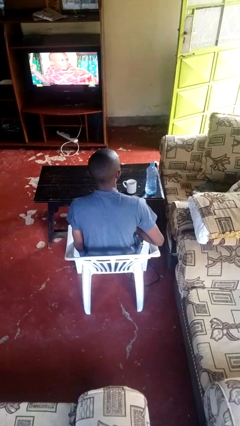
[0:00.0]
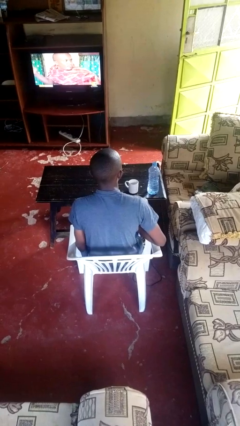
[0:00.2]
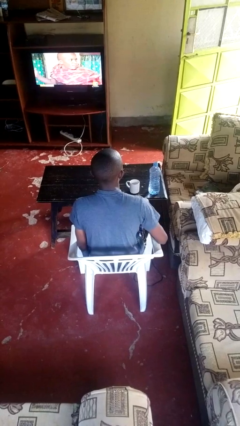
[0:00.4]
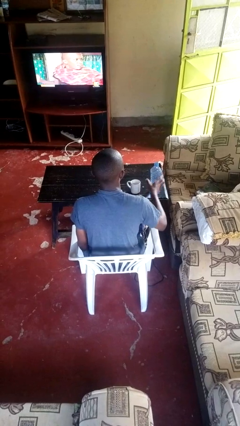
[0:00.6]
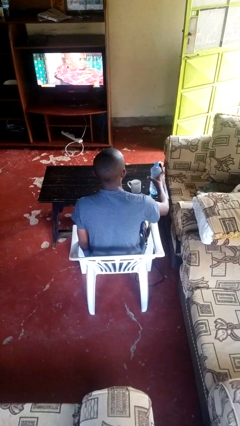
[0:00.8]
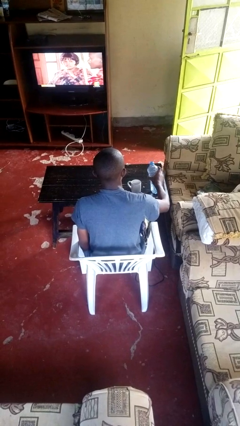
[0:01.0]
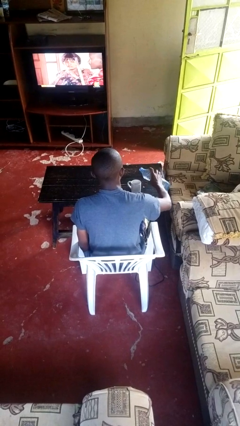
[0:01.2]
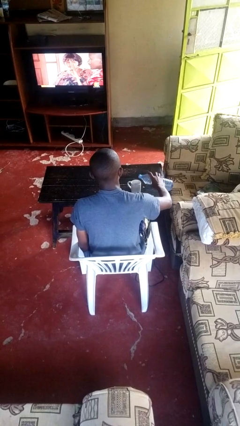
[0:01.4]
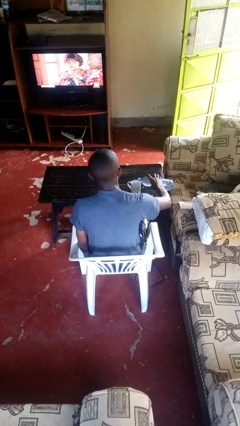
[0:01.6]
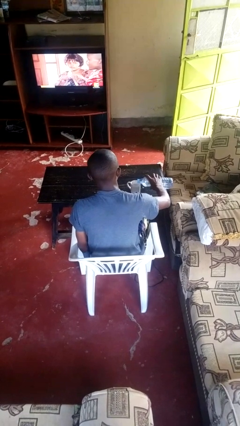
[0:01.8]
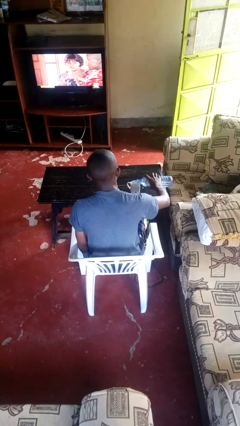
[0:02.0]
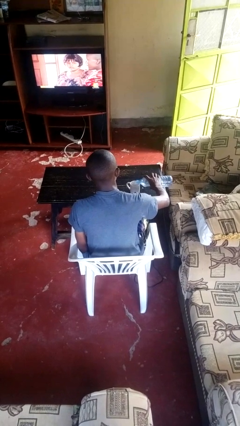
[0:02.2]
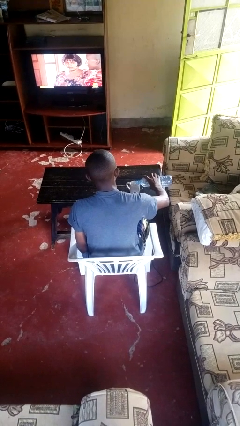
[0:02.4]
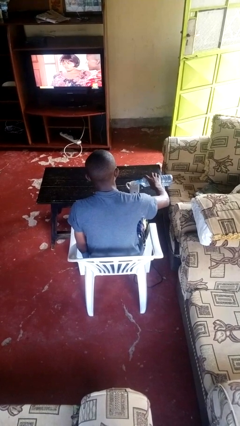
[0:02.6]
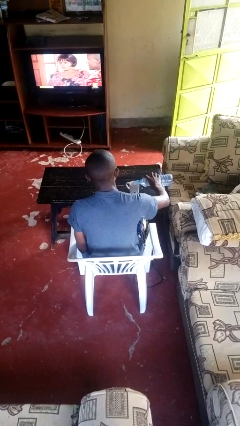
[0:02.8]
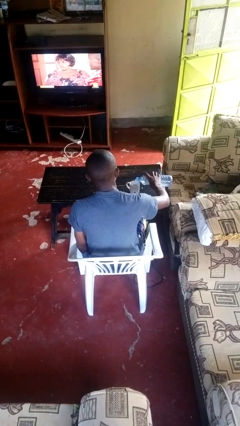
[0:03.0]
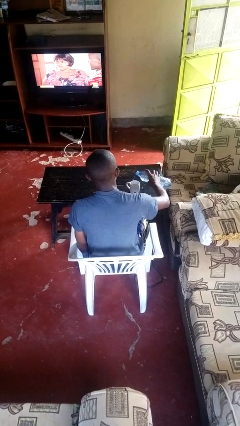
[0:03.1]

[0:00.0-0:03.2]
person pours liquid into cup

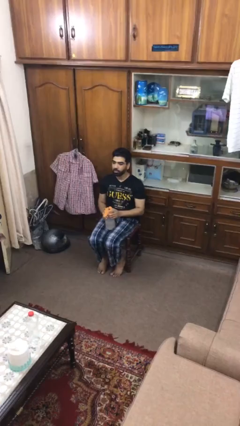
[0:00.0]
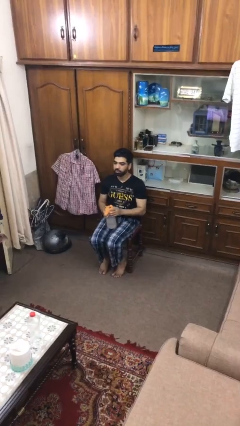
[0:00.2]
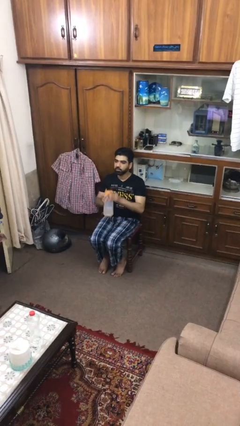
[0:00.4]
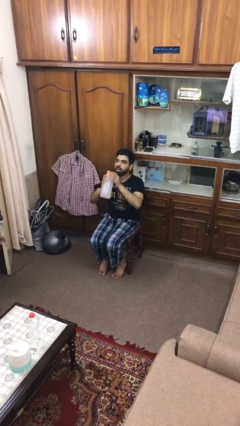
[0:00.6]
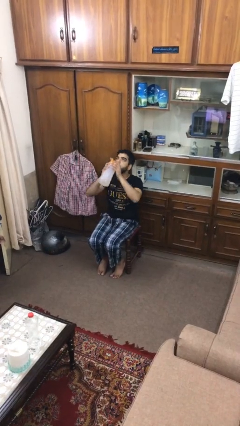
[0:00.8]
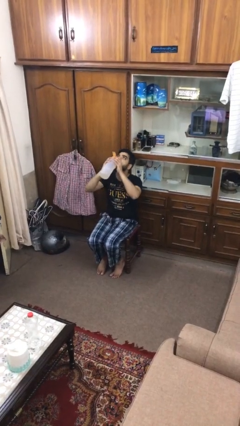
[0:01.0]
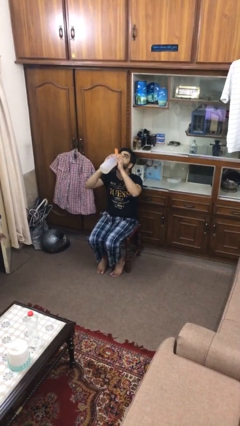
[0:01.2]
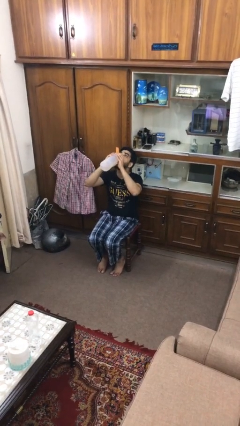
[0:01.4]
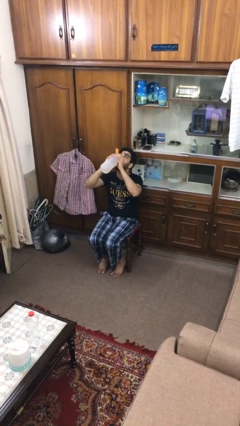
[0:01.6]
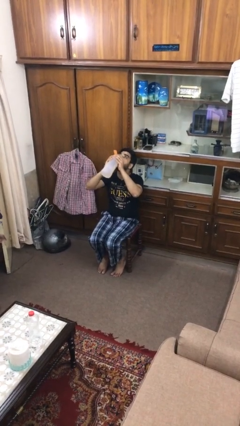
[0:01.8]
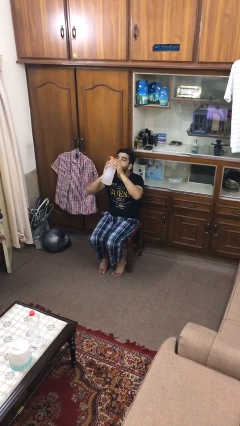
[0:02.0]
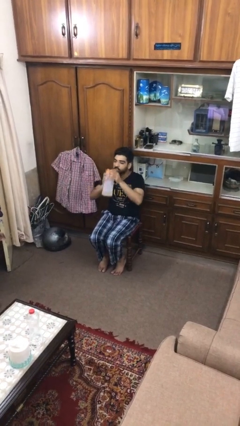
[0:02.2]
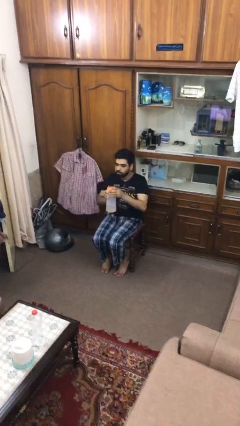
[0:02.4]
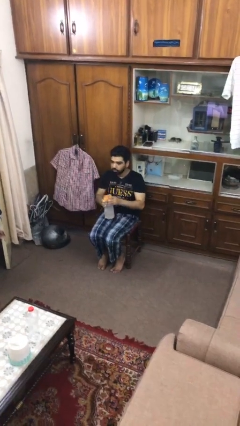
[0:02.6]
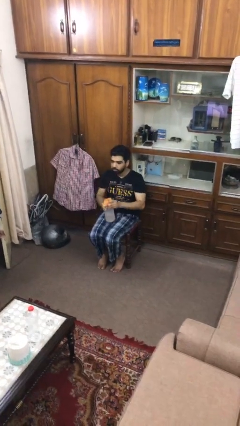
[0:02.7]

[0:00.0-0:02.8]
person drinks from bottle

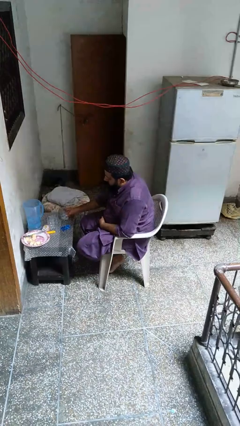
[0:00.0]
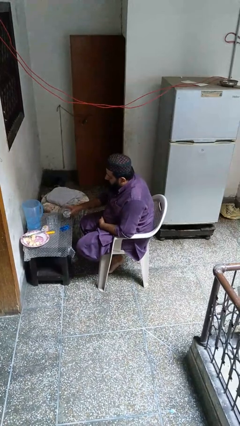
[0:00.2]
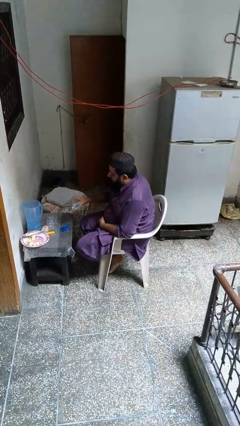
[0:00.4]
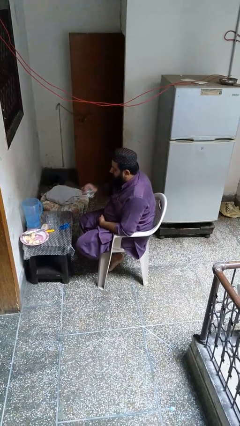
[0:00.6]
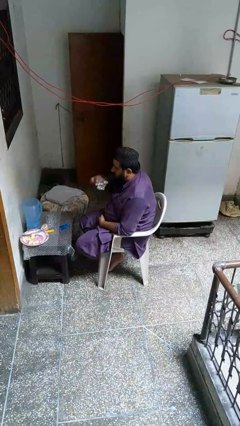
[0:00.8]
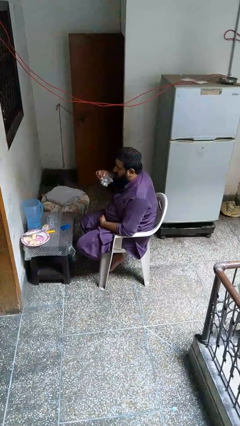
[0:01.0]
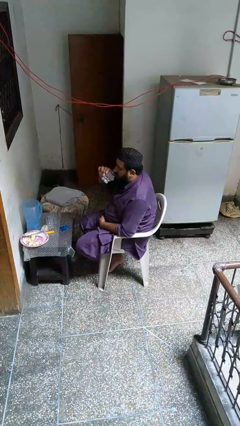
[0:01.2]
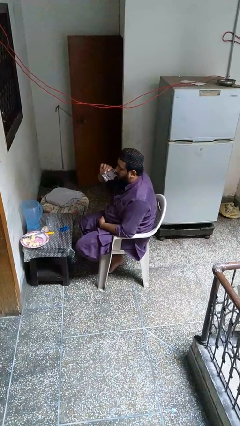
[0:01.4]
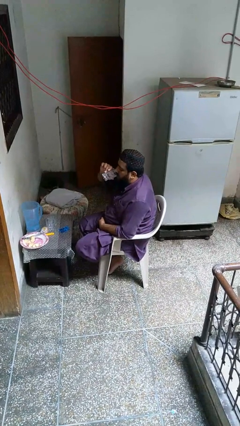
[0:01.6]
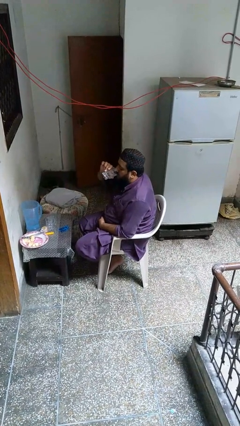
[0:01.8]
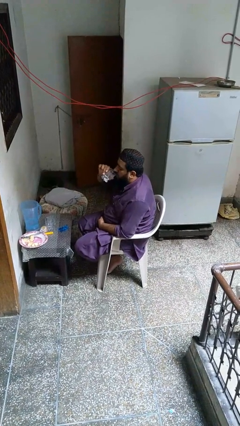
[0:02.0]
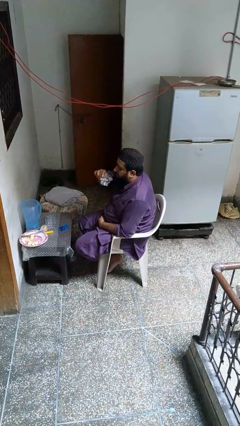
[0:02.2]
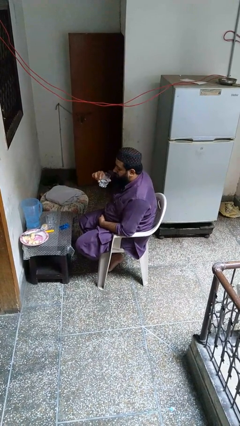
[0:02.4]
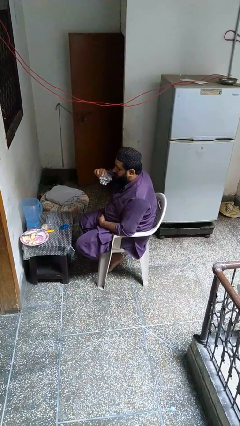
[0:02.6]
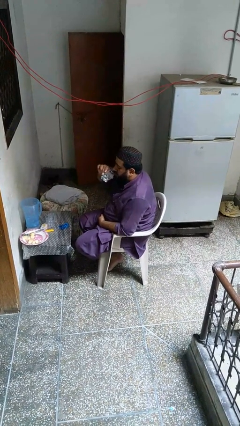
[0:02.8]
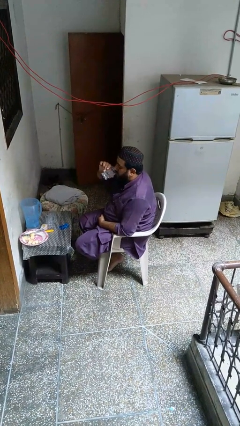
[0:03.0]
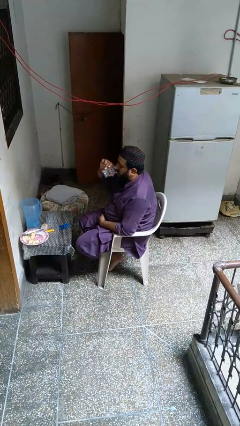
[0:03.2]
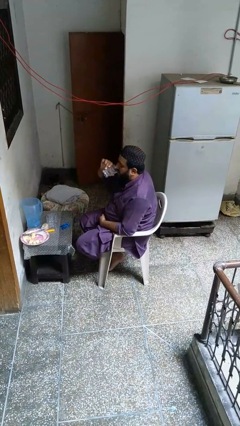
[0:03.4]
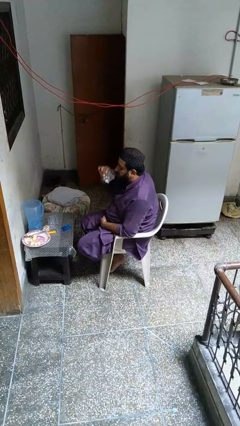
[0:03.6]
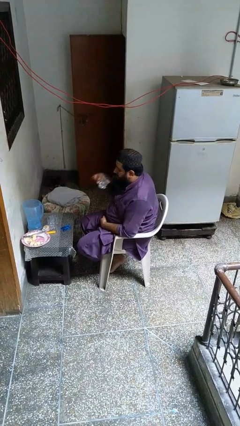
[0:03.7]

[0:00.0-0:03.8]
person drinks from cup

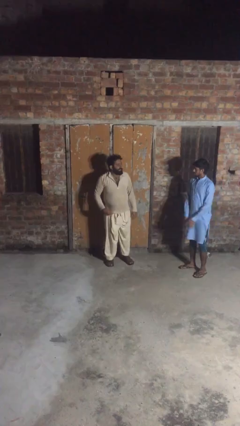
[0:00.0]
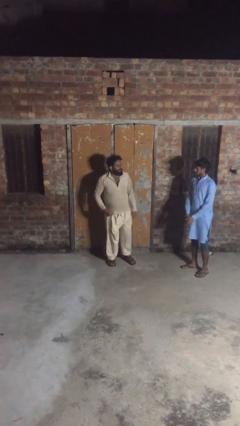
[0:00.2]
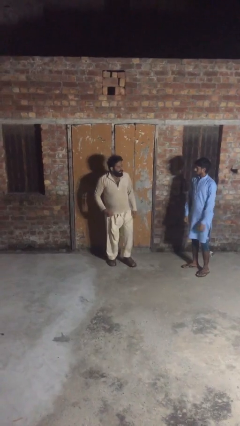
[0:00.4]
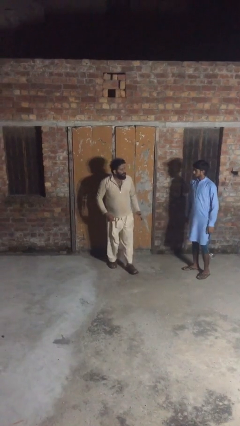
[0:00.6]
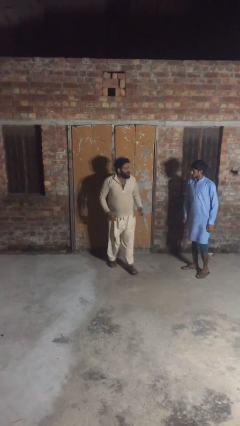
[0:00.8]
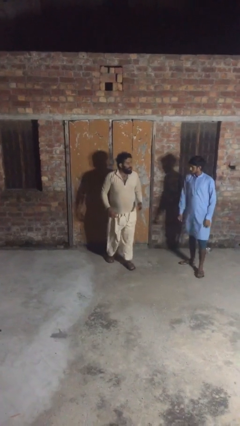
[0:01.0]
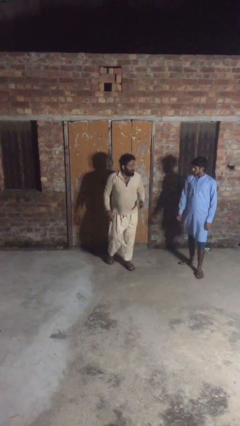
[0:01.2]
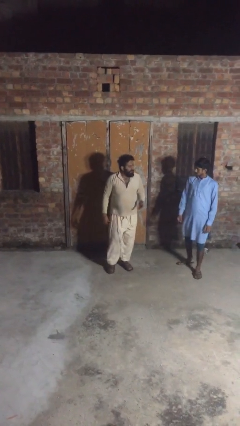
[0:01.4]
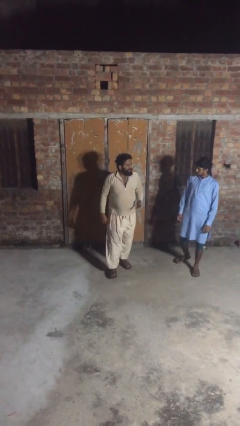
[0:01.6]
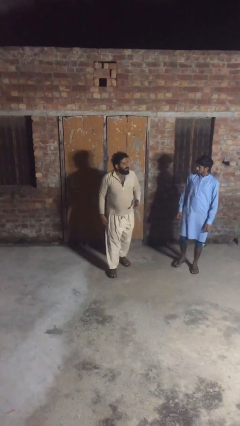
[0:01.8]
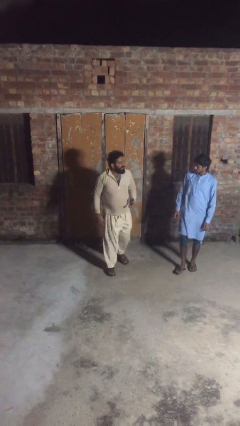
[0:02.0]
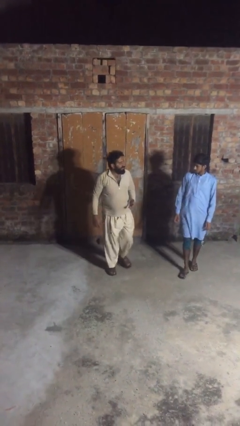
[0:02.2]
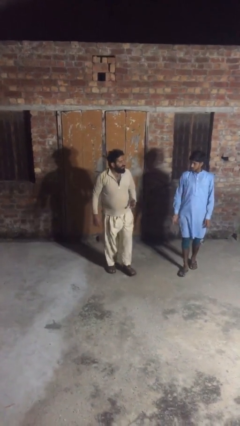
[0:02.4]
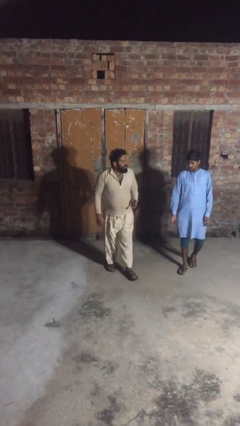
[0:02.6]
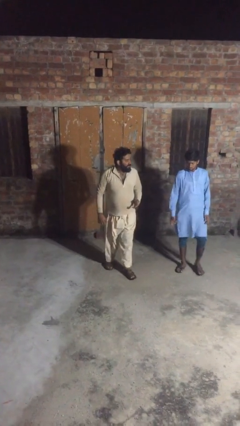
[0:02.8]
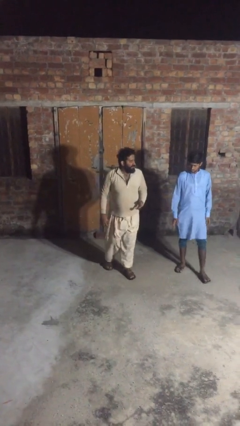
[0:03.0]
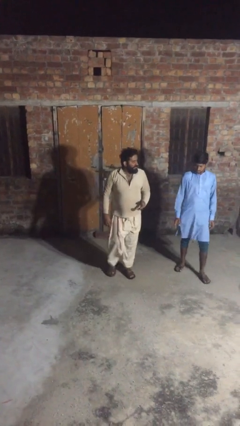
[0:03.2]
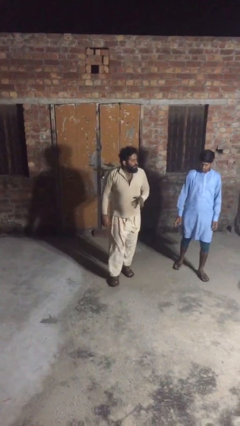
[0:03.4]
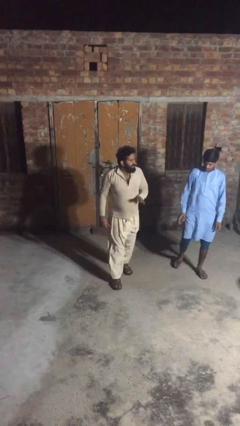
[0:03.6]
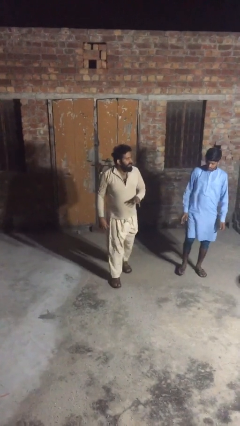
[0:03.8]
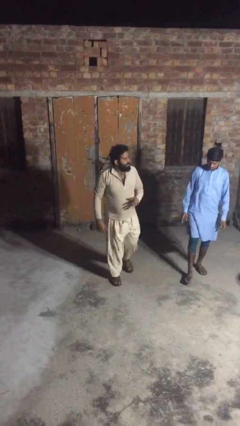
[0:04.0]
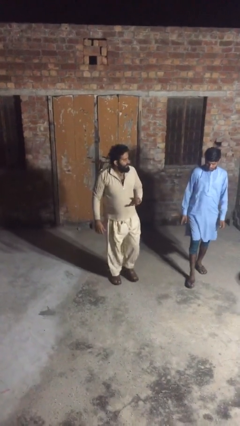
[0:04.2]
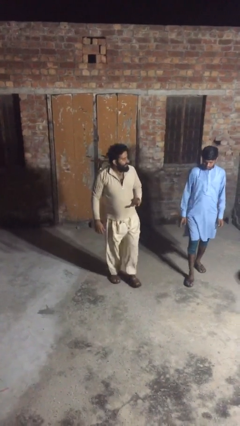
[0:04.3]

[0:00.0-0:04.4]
person talks to person

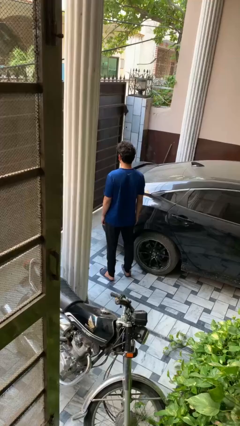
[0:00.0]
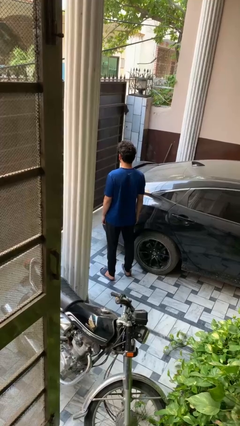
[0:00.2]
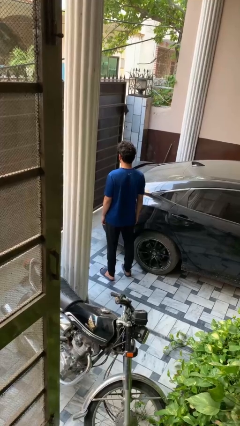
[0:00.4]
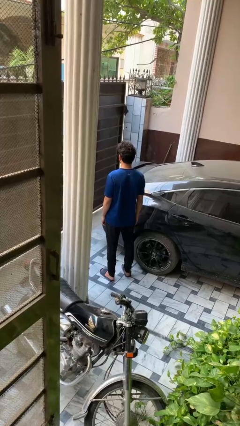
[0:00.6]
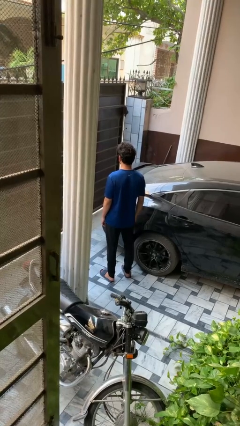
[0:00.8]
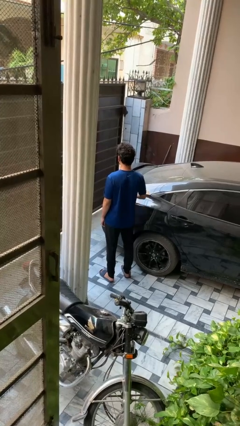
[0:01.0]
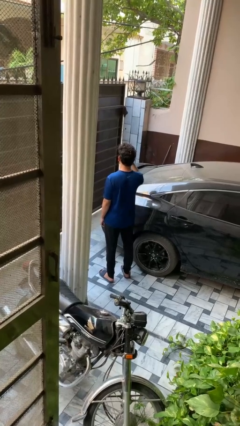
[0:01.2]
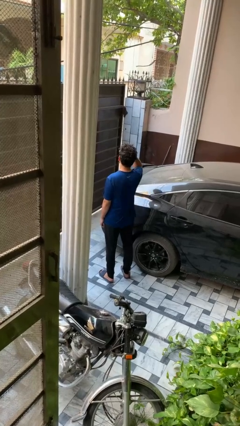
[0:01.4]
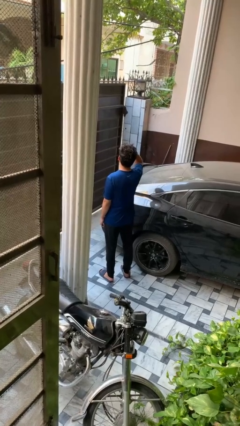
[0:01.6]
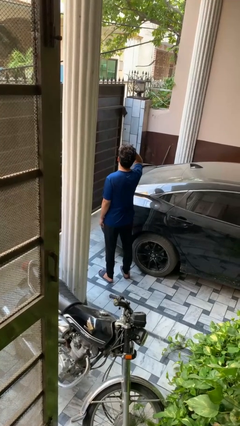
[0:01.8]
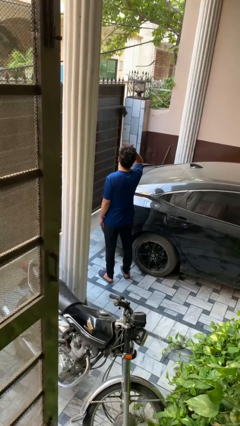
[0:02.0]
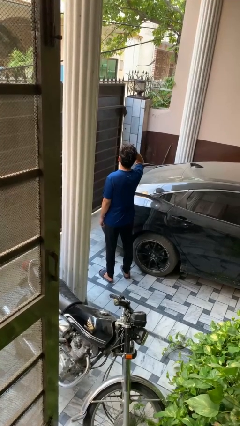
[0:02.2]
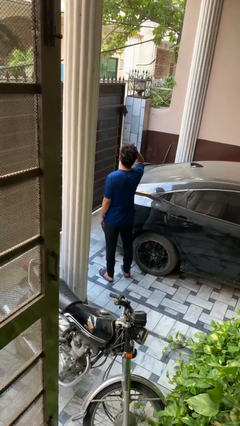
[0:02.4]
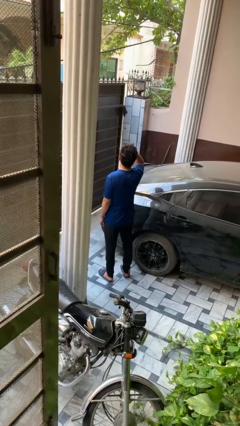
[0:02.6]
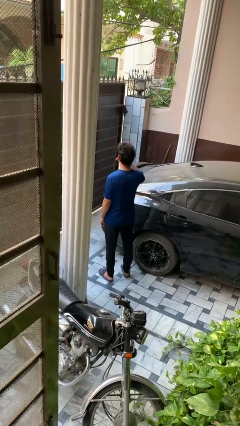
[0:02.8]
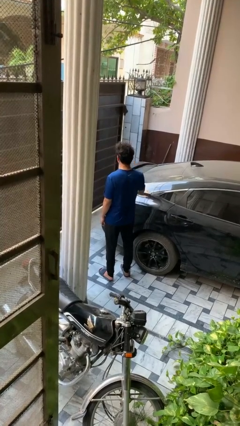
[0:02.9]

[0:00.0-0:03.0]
person shades eyes

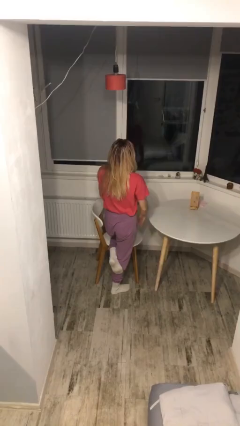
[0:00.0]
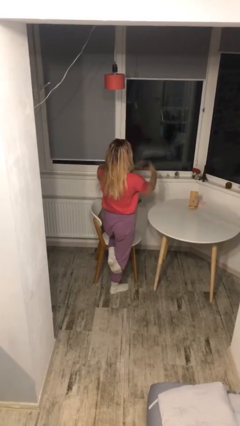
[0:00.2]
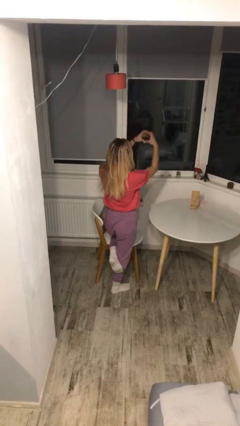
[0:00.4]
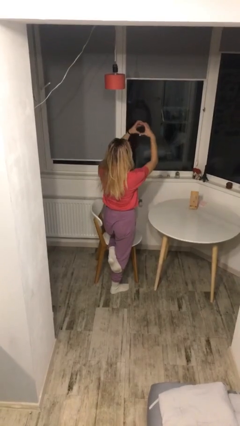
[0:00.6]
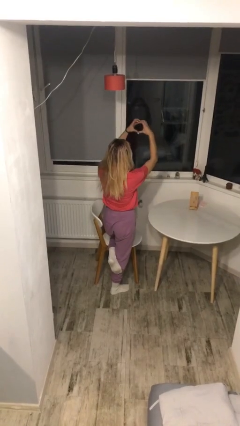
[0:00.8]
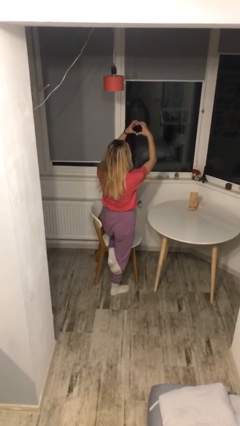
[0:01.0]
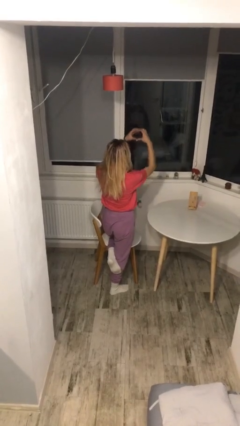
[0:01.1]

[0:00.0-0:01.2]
person gestures heart
